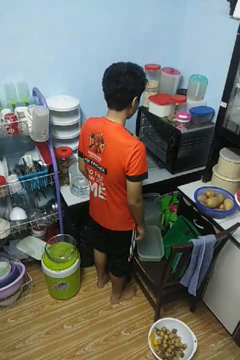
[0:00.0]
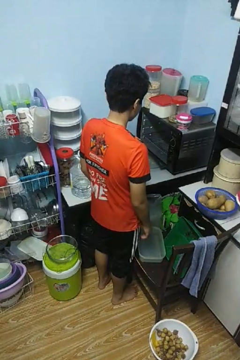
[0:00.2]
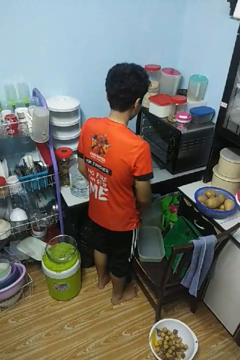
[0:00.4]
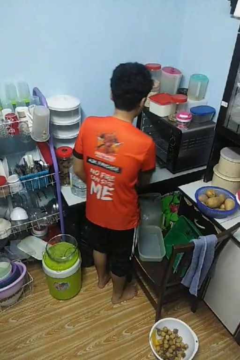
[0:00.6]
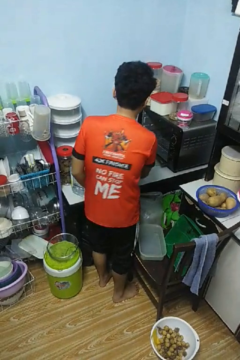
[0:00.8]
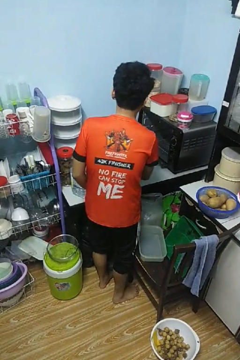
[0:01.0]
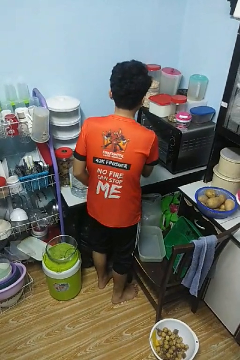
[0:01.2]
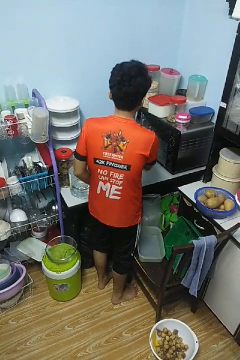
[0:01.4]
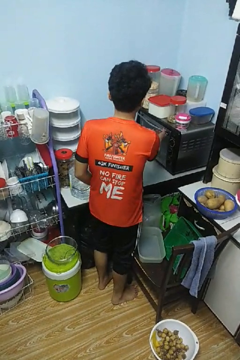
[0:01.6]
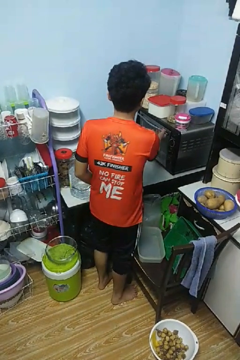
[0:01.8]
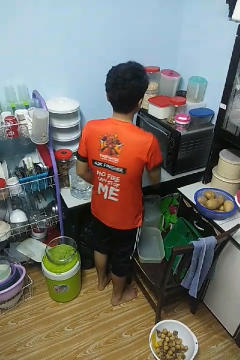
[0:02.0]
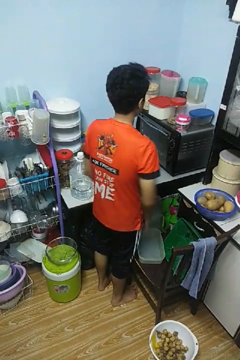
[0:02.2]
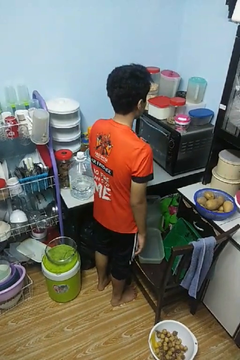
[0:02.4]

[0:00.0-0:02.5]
person closes oven door

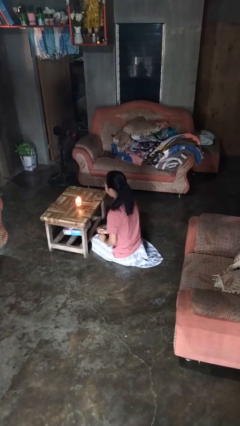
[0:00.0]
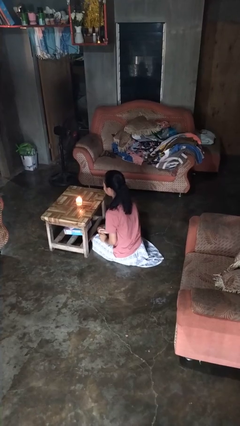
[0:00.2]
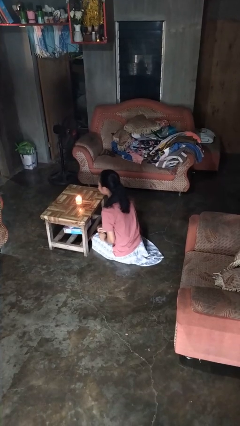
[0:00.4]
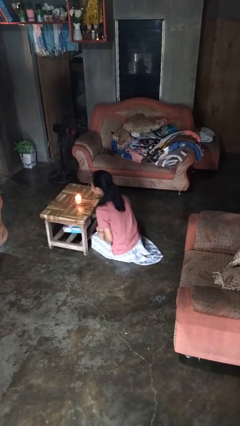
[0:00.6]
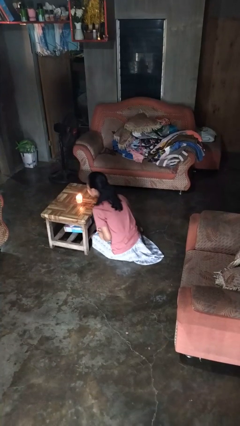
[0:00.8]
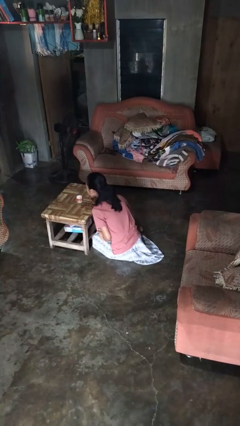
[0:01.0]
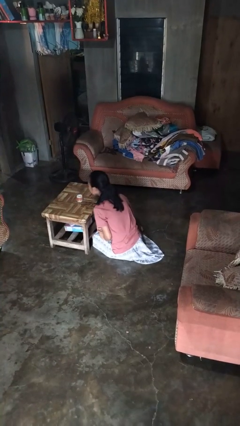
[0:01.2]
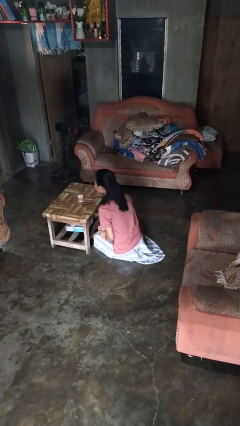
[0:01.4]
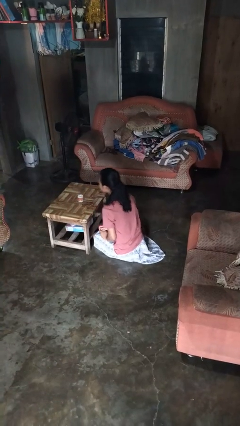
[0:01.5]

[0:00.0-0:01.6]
person extinguishes candle

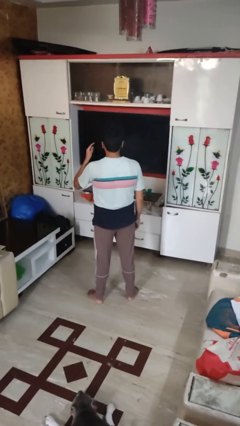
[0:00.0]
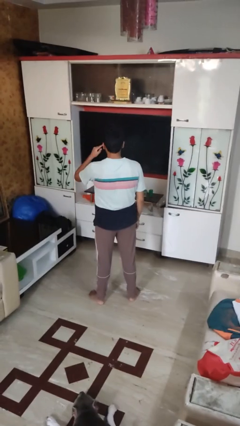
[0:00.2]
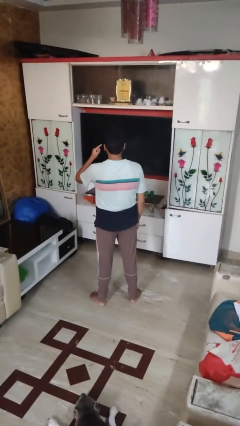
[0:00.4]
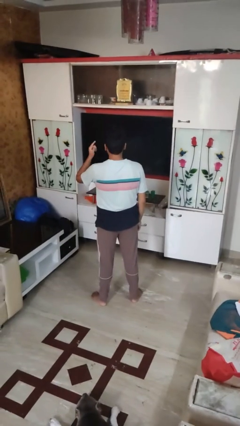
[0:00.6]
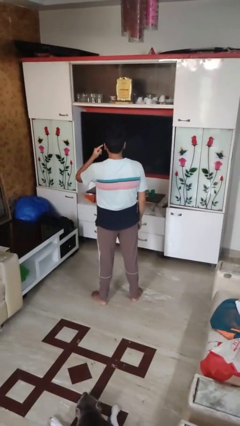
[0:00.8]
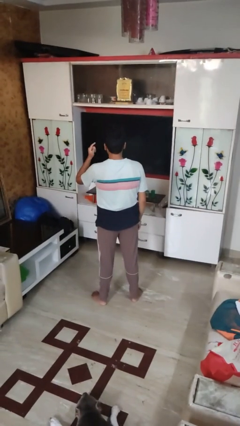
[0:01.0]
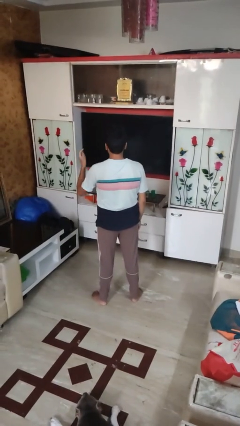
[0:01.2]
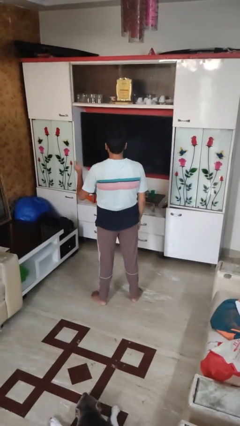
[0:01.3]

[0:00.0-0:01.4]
person gestures listen closely

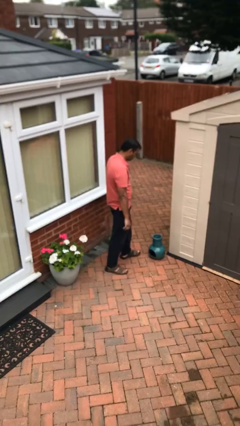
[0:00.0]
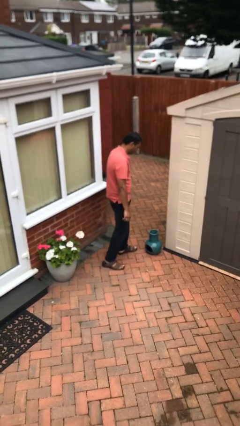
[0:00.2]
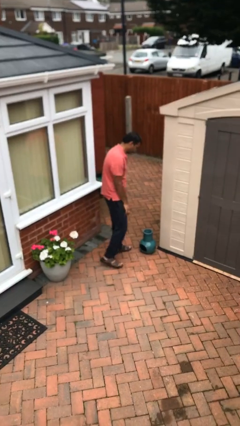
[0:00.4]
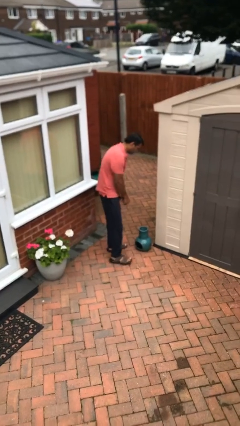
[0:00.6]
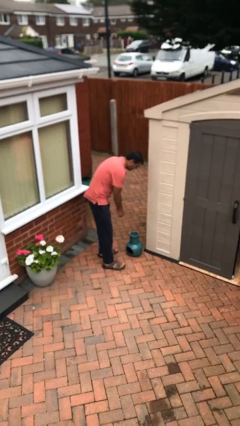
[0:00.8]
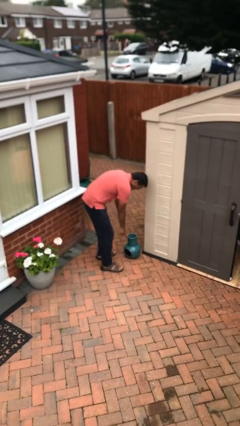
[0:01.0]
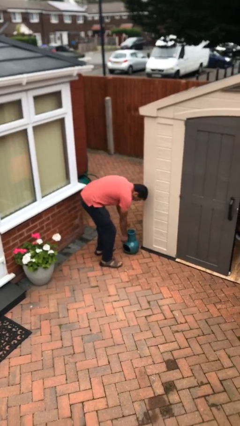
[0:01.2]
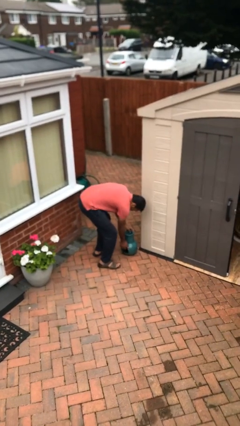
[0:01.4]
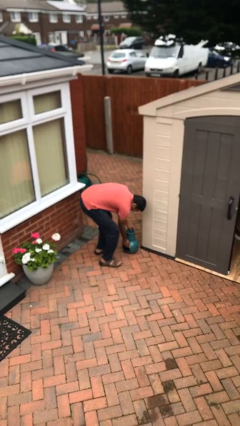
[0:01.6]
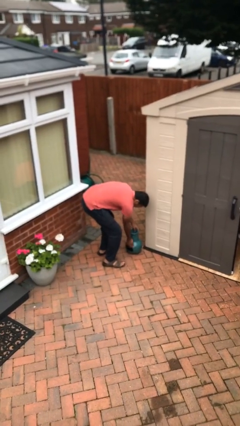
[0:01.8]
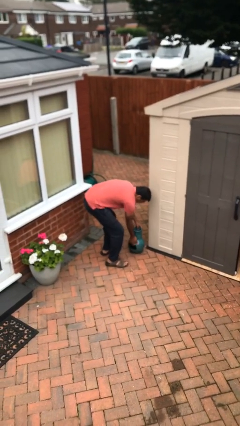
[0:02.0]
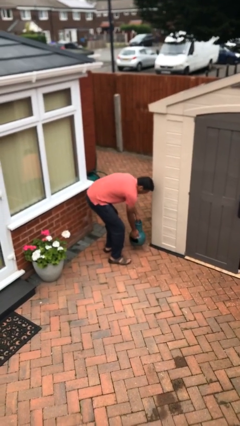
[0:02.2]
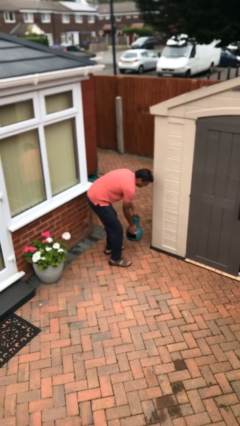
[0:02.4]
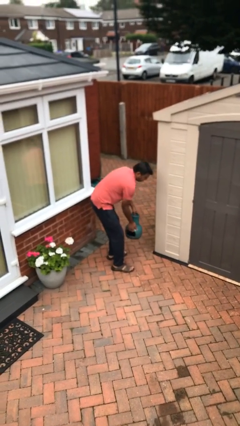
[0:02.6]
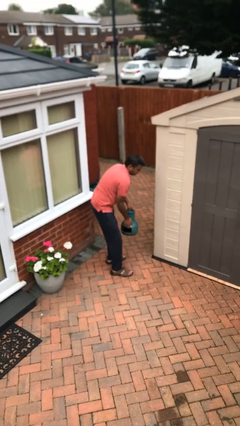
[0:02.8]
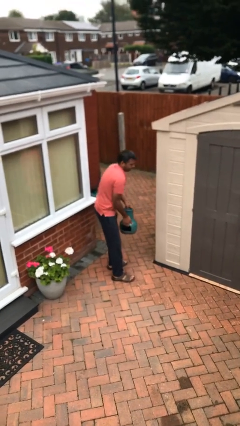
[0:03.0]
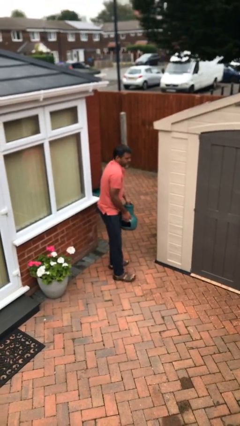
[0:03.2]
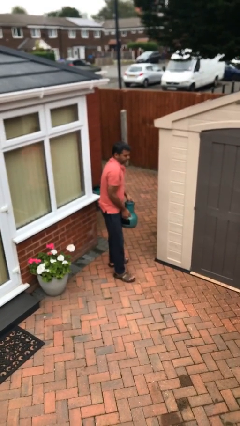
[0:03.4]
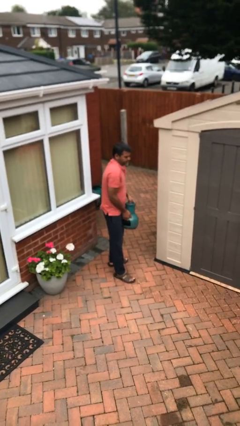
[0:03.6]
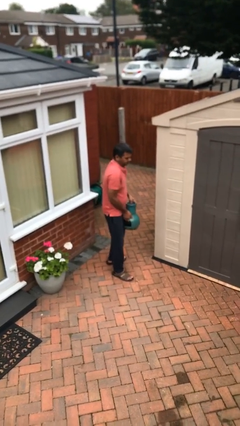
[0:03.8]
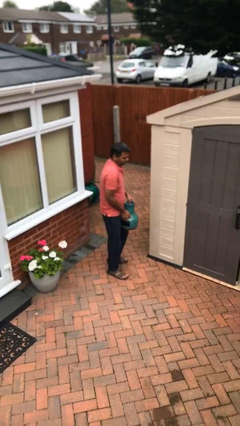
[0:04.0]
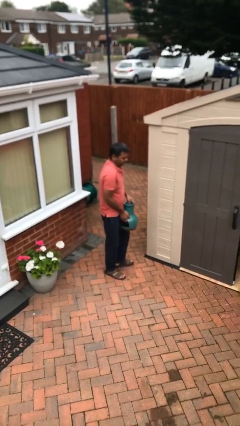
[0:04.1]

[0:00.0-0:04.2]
person picks up object from floor

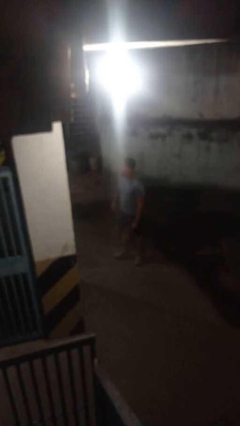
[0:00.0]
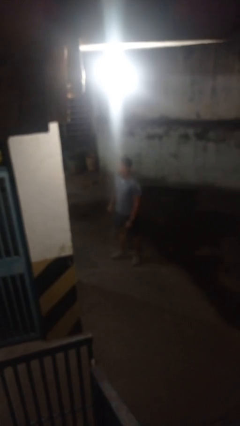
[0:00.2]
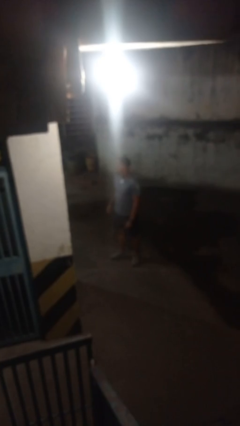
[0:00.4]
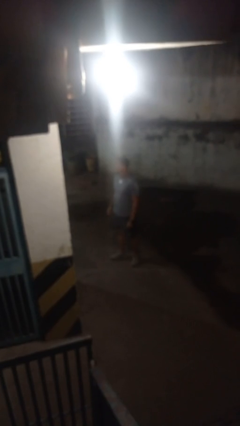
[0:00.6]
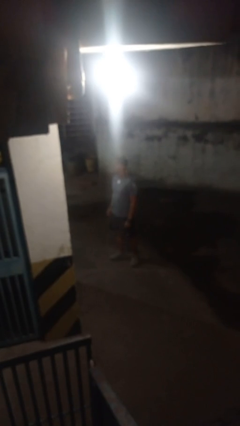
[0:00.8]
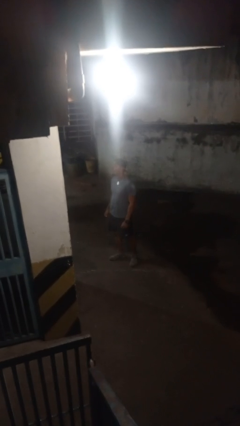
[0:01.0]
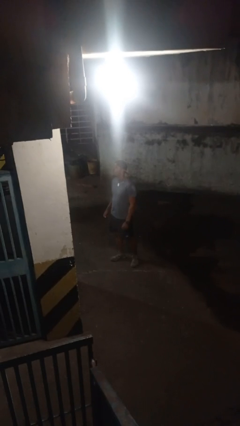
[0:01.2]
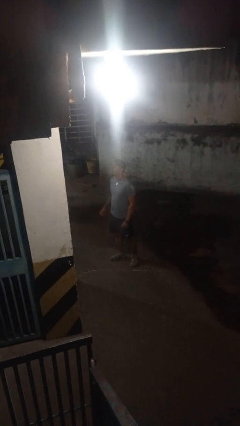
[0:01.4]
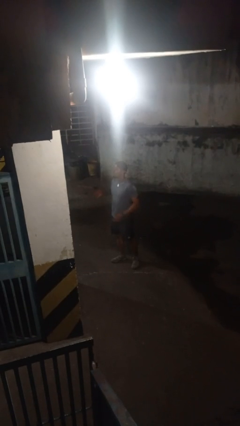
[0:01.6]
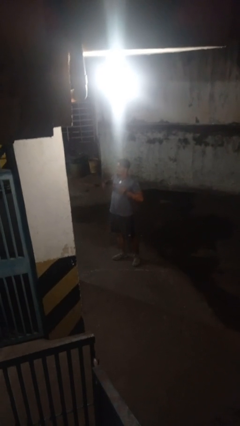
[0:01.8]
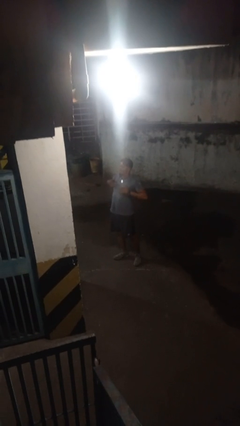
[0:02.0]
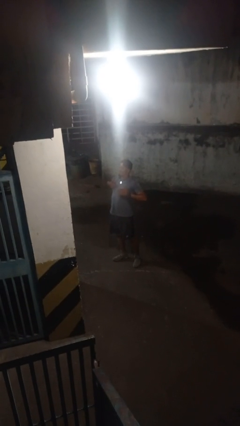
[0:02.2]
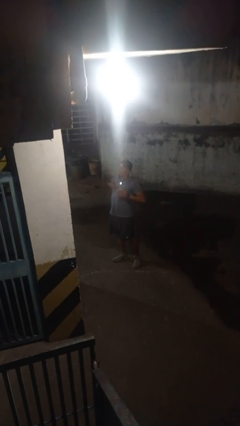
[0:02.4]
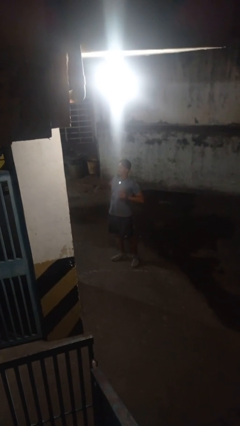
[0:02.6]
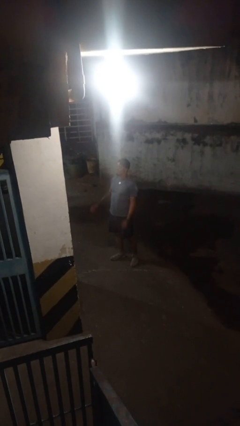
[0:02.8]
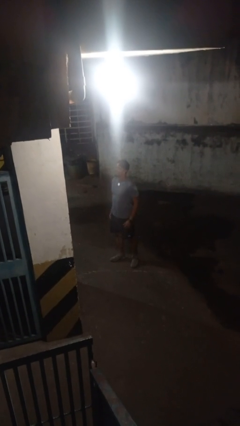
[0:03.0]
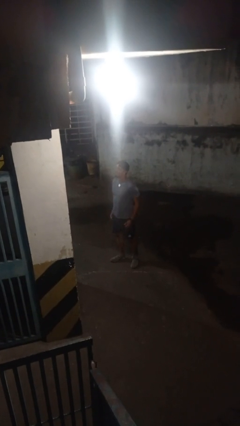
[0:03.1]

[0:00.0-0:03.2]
person drums on chest

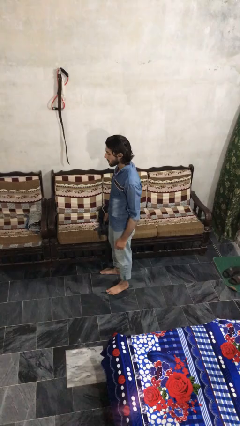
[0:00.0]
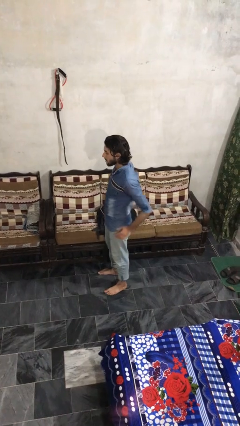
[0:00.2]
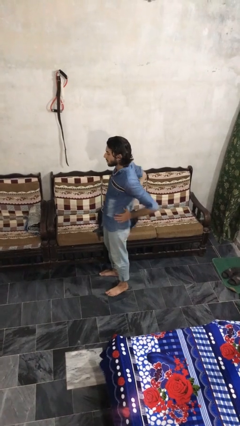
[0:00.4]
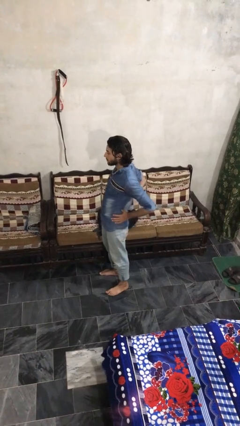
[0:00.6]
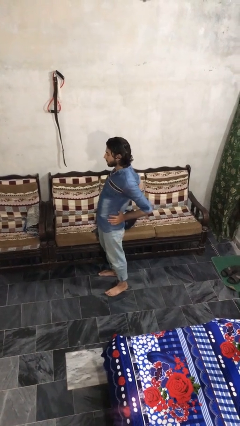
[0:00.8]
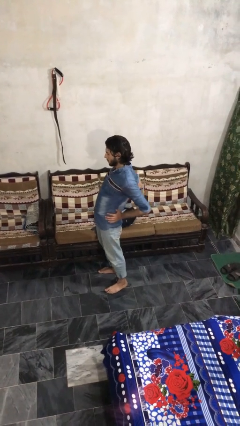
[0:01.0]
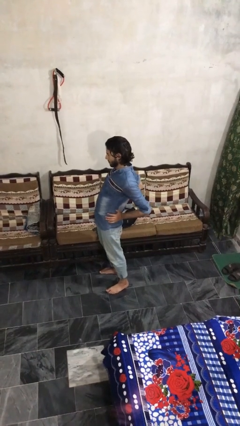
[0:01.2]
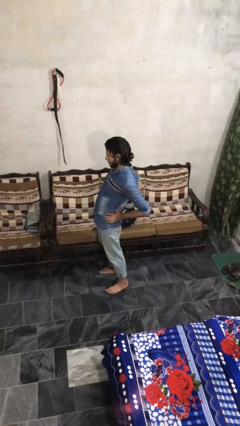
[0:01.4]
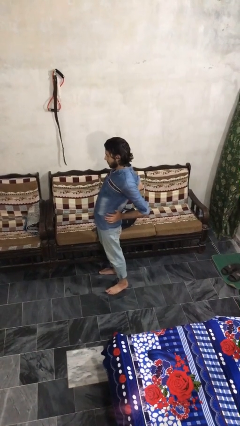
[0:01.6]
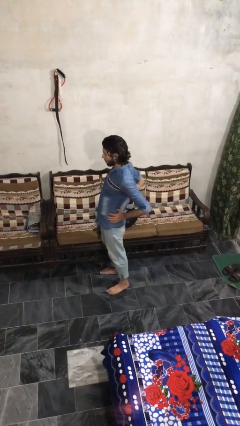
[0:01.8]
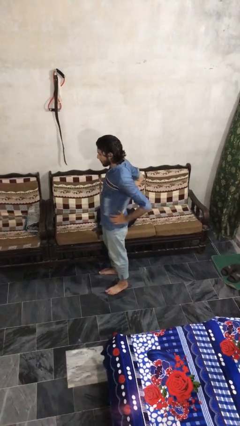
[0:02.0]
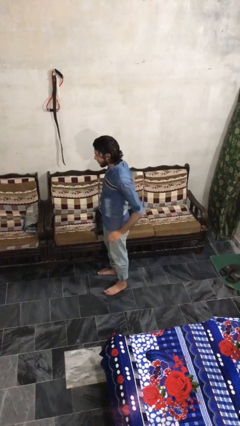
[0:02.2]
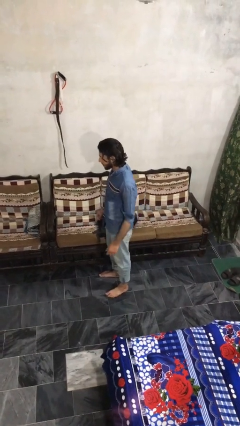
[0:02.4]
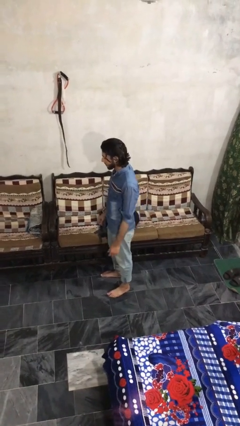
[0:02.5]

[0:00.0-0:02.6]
person stretches back

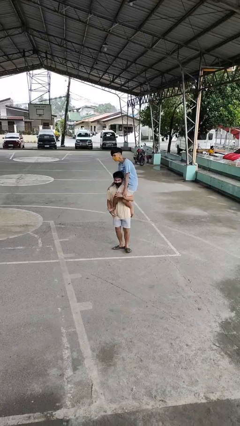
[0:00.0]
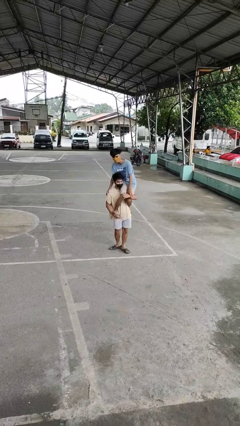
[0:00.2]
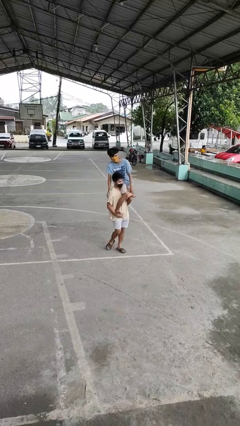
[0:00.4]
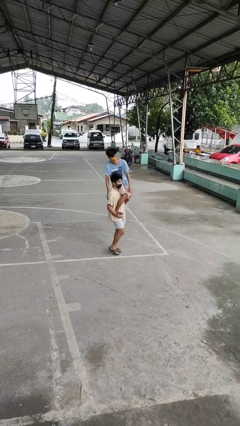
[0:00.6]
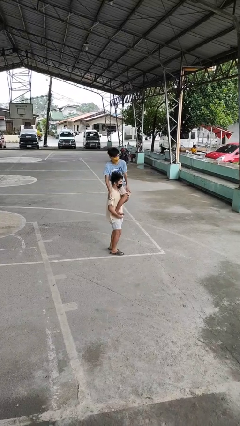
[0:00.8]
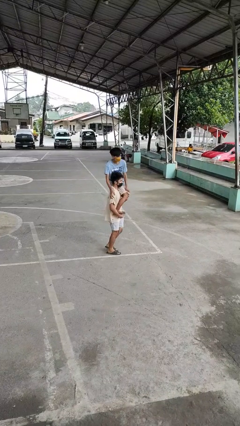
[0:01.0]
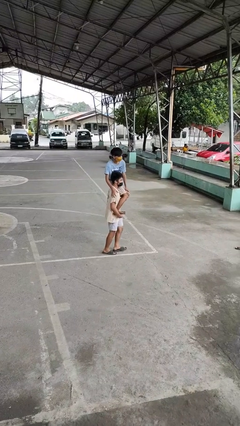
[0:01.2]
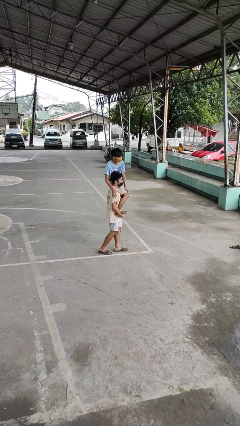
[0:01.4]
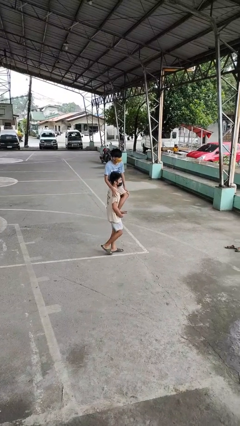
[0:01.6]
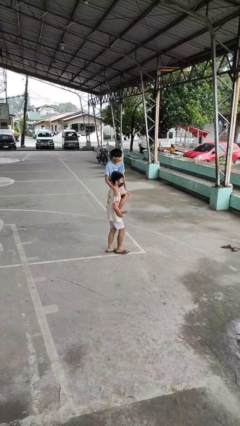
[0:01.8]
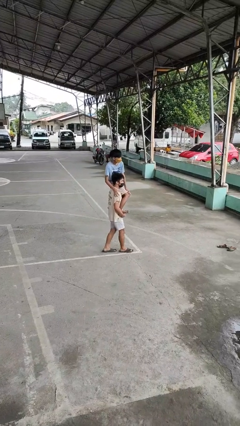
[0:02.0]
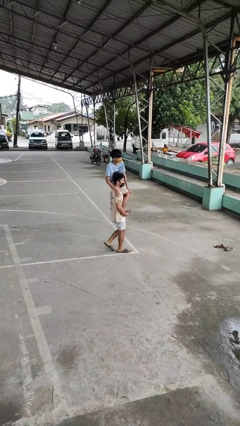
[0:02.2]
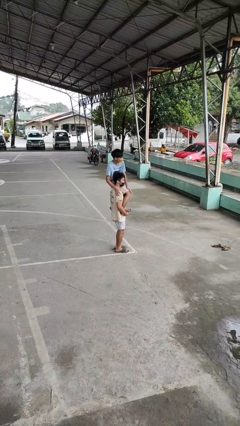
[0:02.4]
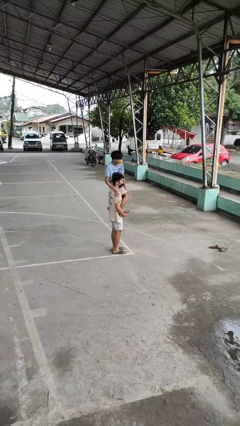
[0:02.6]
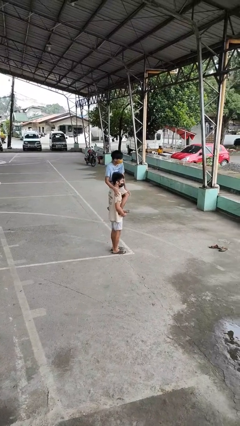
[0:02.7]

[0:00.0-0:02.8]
person carries person on shoulders
